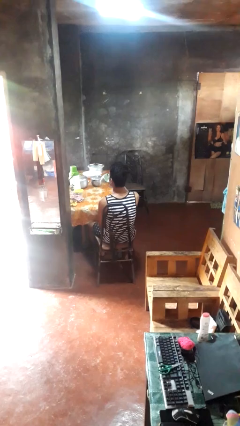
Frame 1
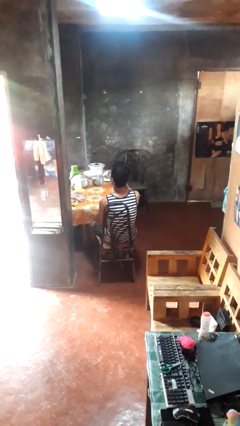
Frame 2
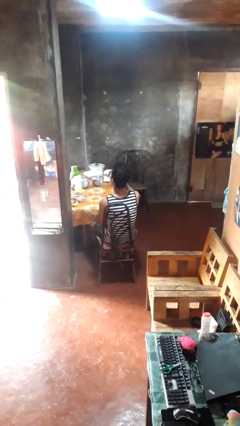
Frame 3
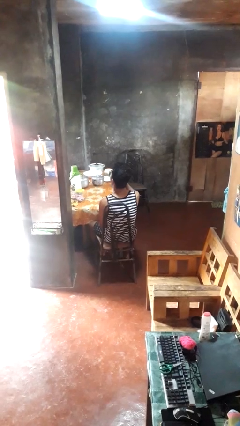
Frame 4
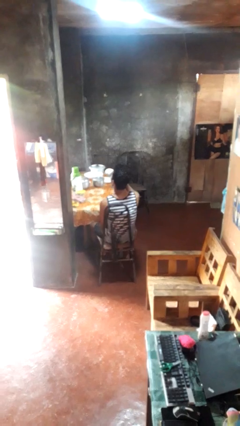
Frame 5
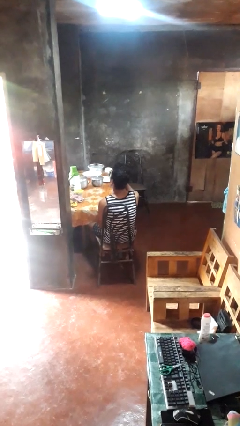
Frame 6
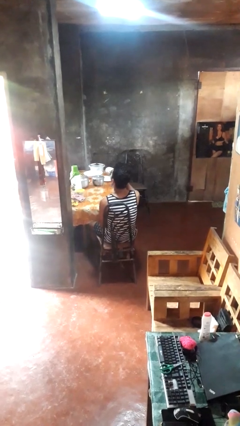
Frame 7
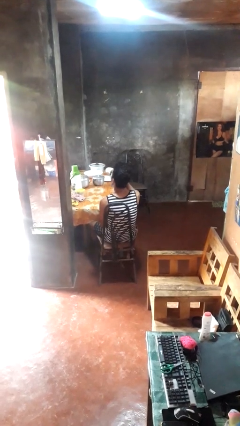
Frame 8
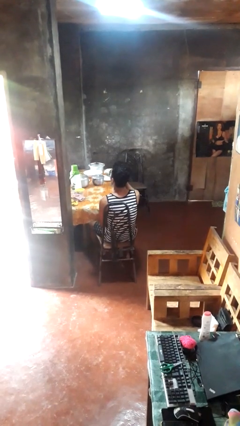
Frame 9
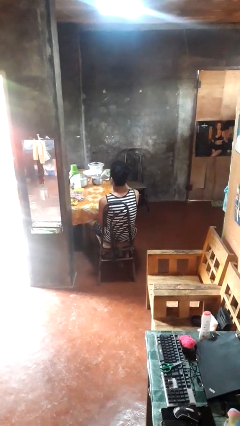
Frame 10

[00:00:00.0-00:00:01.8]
person drinks from mug

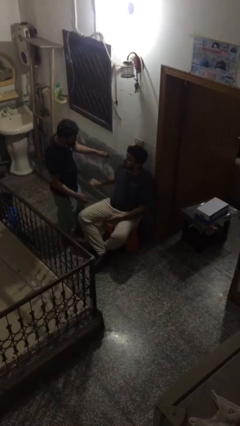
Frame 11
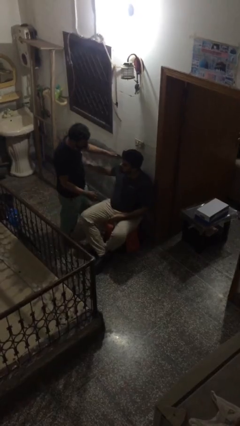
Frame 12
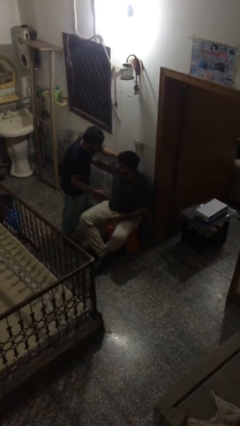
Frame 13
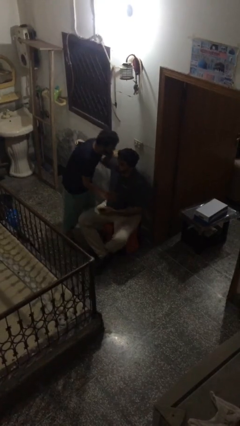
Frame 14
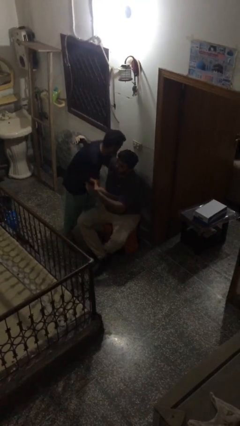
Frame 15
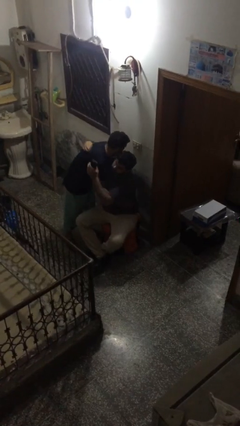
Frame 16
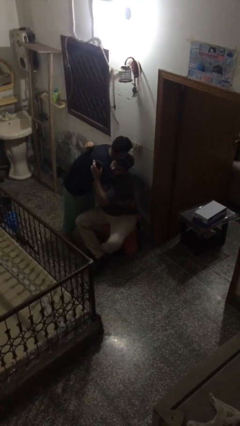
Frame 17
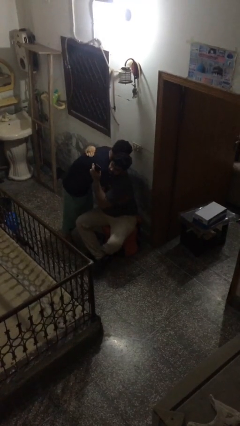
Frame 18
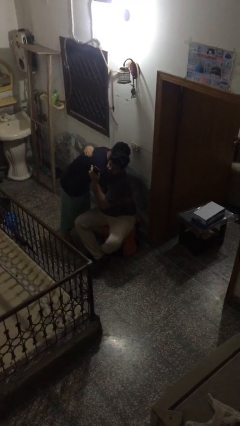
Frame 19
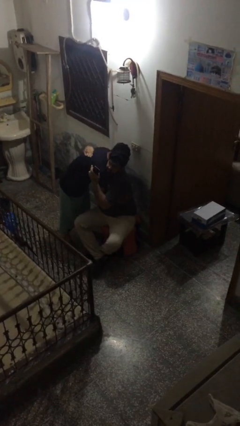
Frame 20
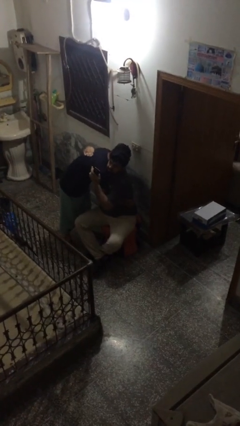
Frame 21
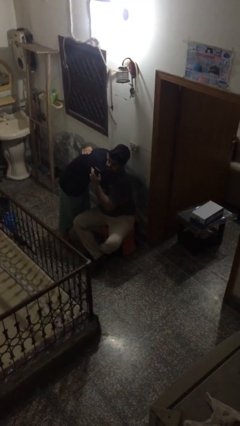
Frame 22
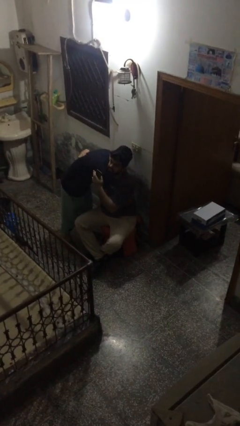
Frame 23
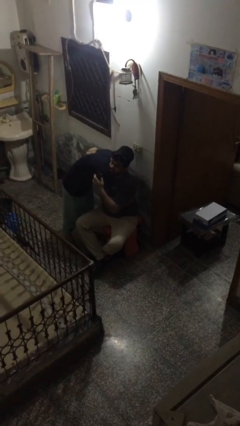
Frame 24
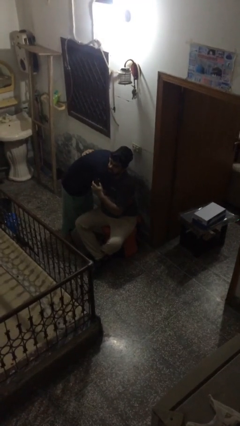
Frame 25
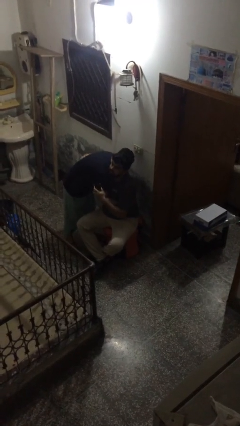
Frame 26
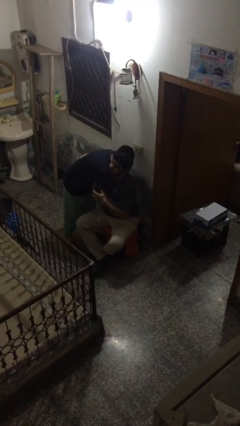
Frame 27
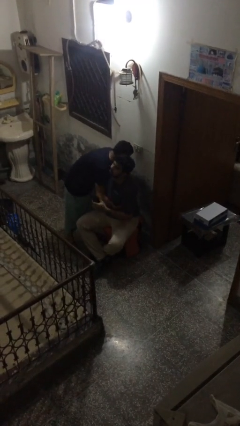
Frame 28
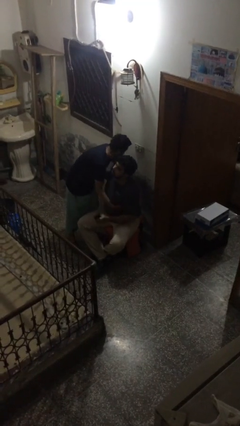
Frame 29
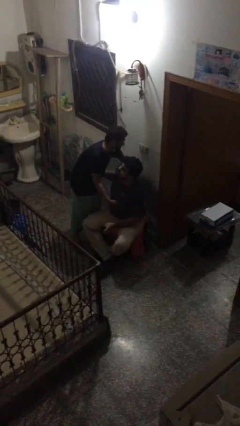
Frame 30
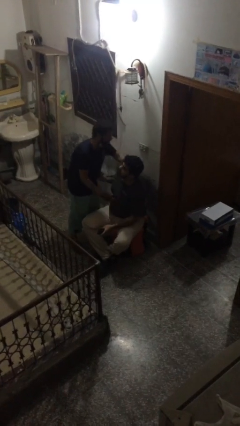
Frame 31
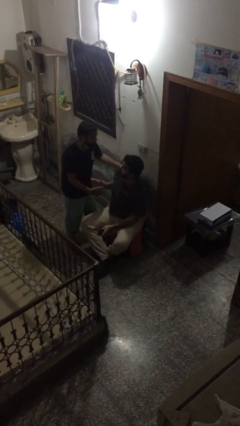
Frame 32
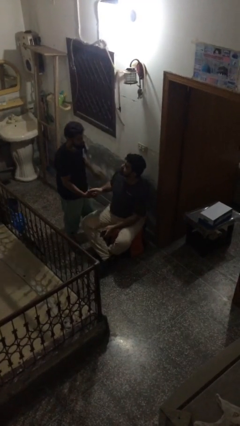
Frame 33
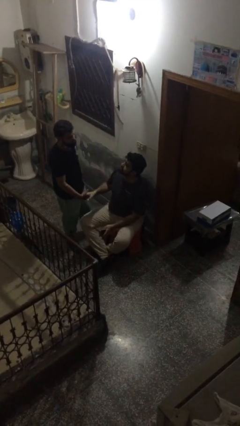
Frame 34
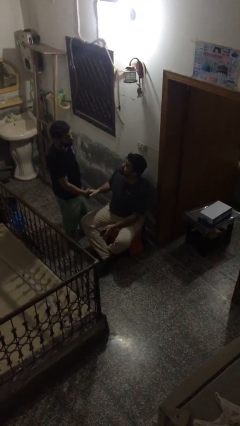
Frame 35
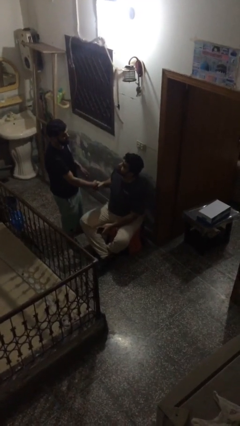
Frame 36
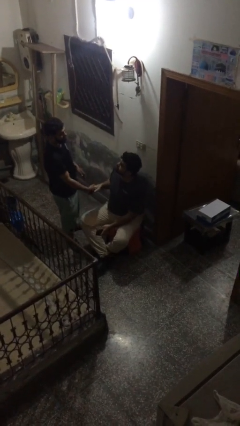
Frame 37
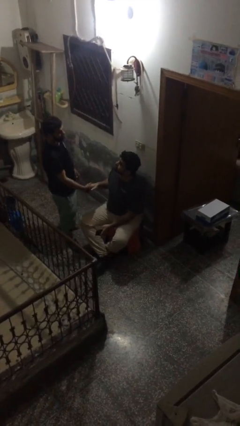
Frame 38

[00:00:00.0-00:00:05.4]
person embraces person

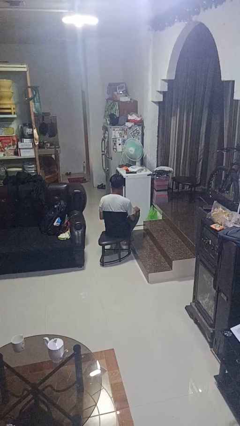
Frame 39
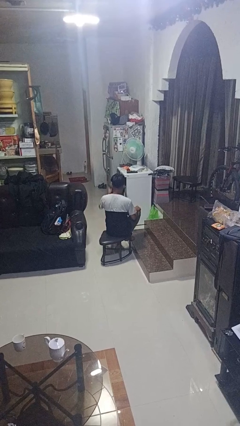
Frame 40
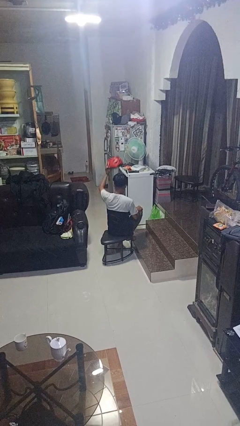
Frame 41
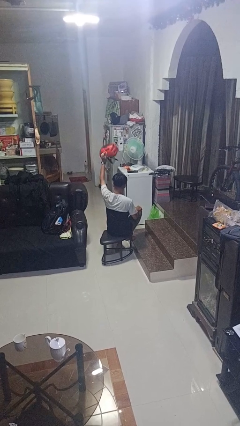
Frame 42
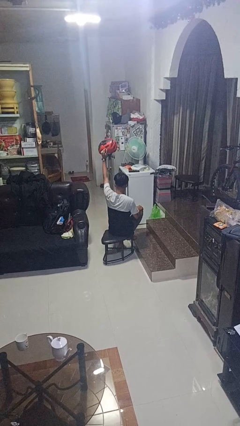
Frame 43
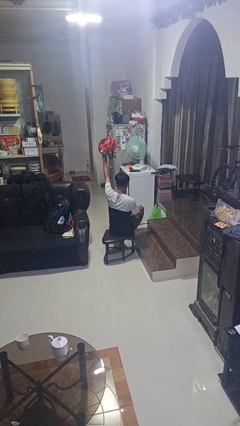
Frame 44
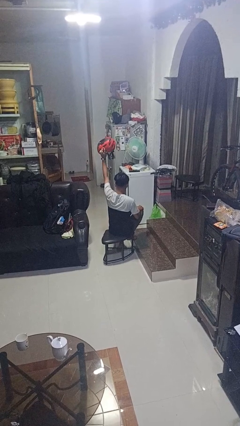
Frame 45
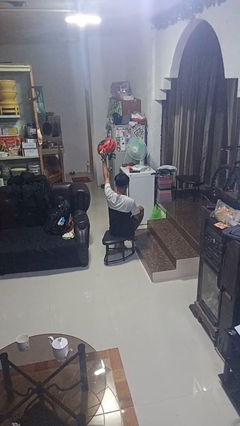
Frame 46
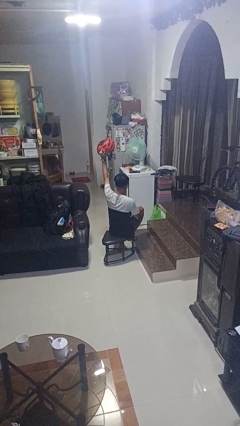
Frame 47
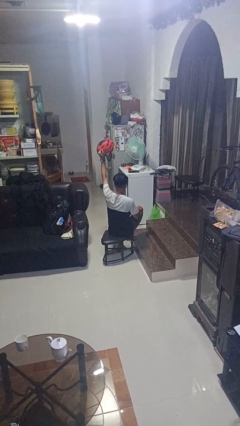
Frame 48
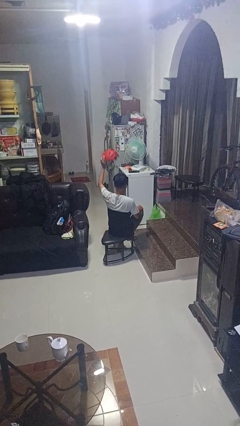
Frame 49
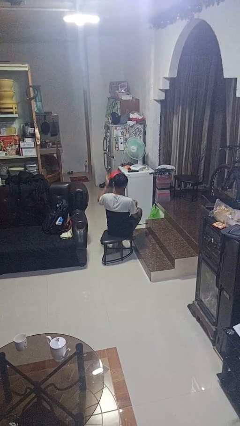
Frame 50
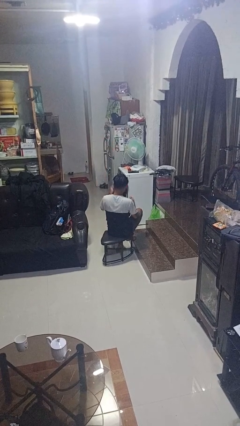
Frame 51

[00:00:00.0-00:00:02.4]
person holds object above head

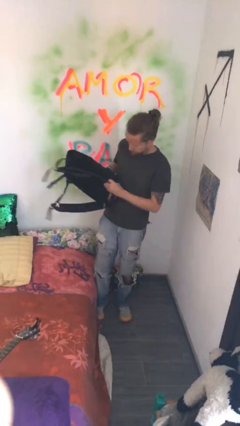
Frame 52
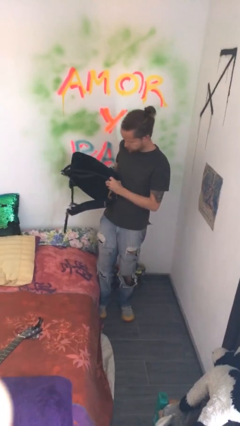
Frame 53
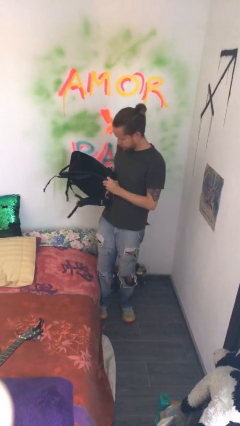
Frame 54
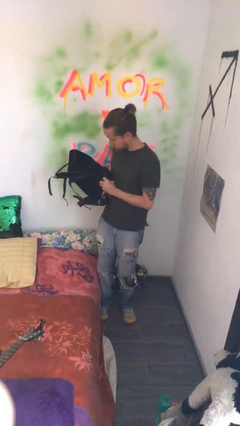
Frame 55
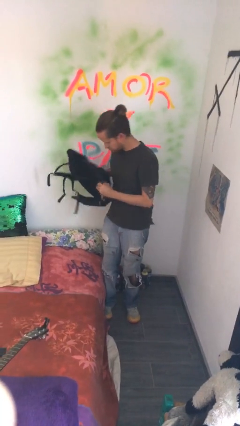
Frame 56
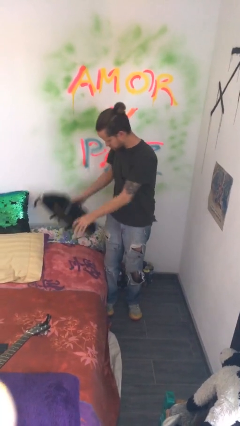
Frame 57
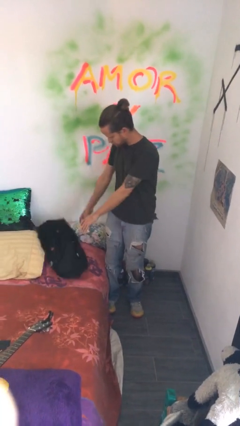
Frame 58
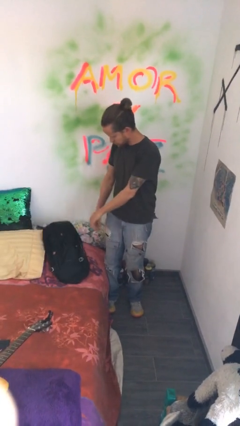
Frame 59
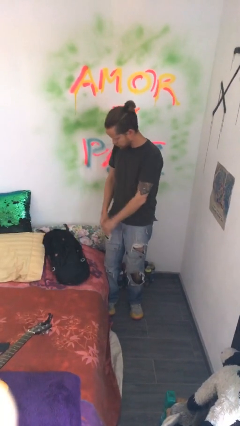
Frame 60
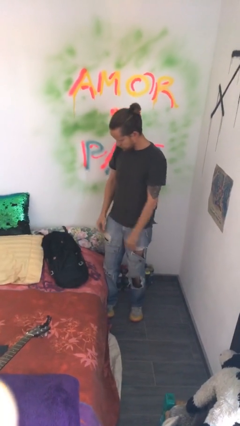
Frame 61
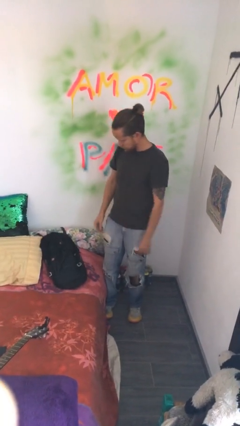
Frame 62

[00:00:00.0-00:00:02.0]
person puts down object on bed

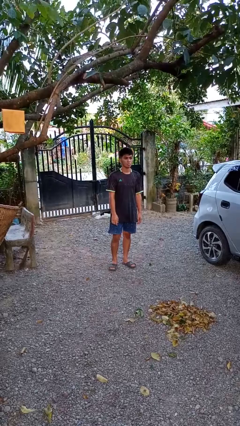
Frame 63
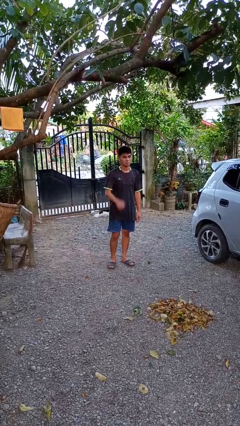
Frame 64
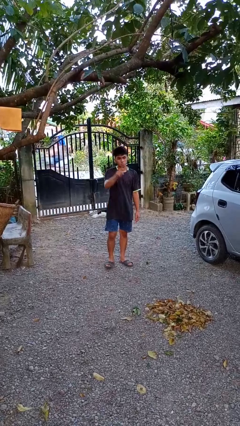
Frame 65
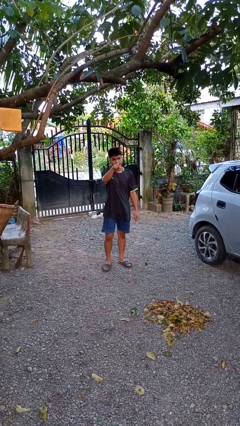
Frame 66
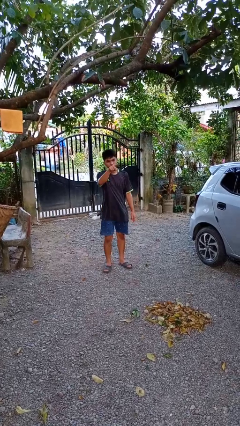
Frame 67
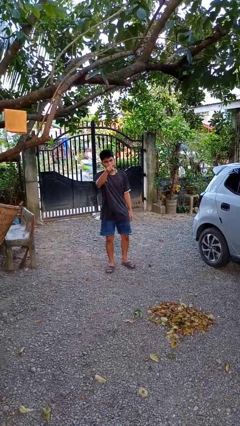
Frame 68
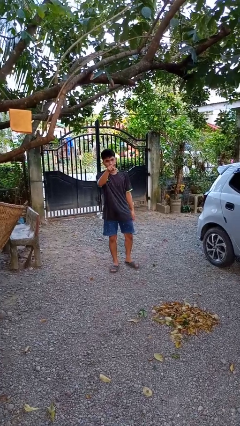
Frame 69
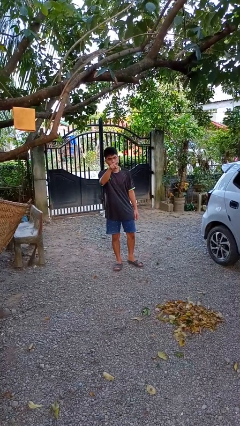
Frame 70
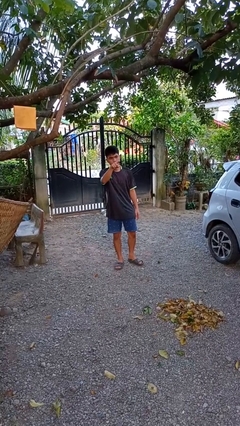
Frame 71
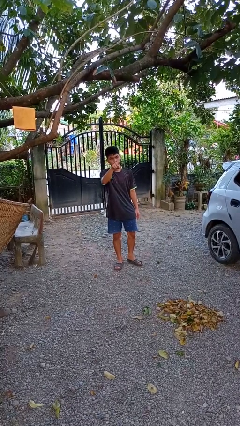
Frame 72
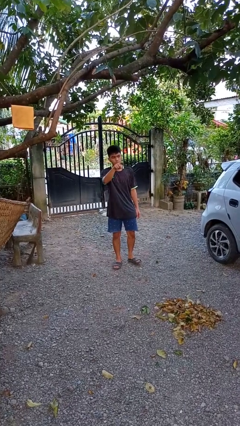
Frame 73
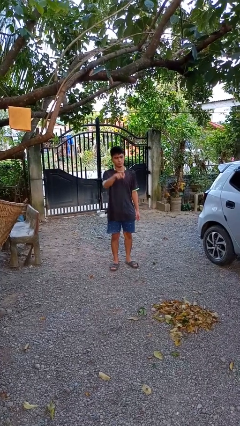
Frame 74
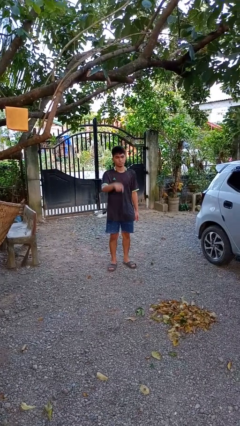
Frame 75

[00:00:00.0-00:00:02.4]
person points at person

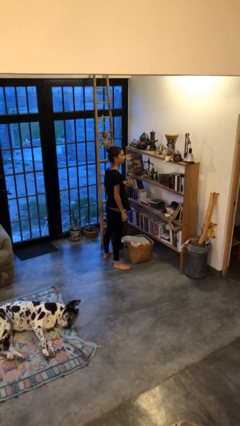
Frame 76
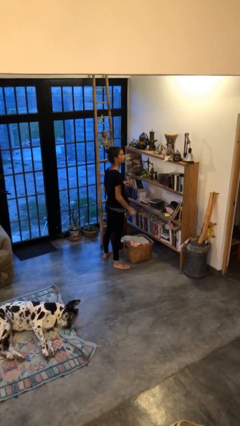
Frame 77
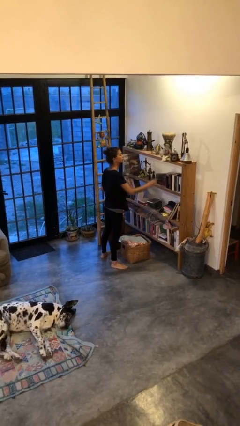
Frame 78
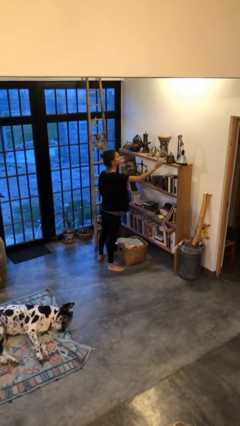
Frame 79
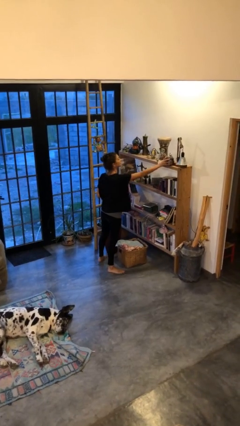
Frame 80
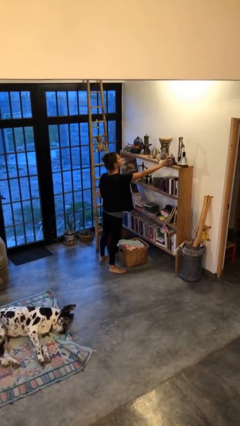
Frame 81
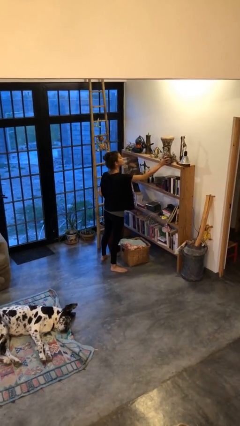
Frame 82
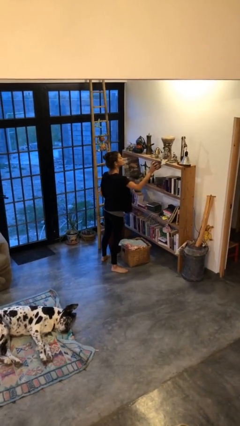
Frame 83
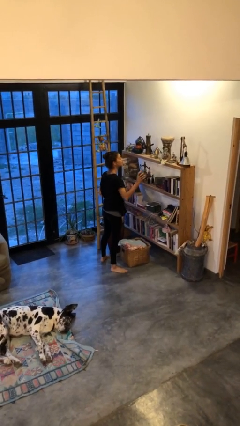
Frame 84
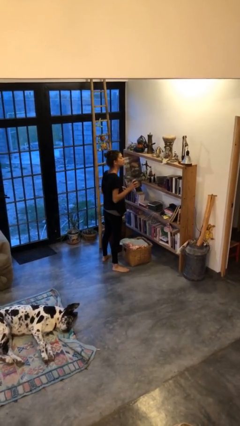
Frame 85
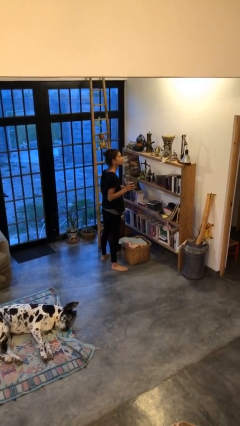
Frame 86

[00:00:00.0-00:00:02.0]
person picks up object from countertop

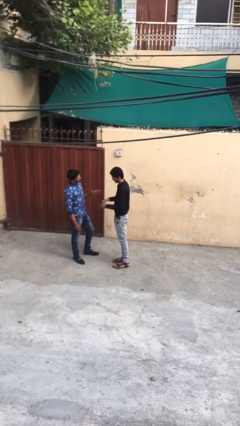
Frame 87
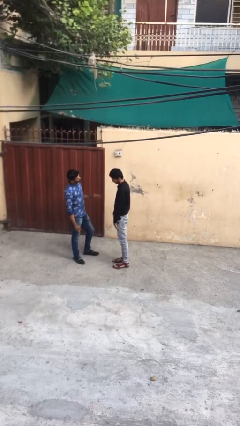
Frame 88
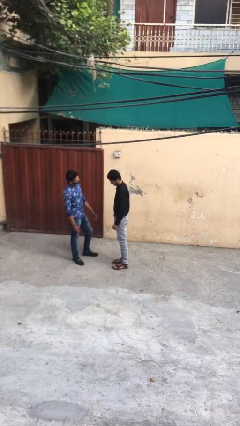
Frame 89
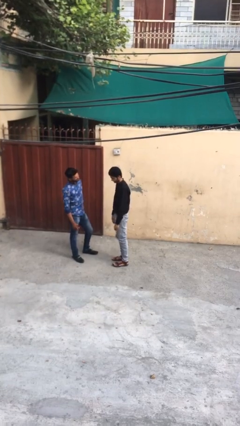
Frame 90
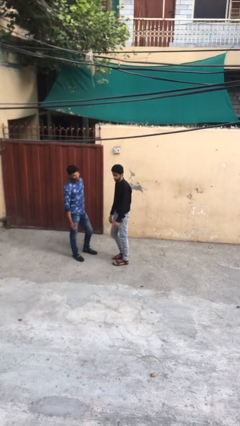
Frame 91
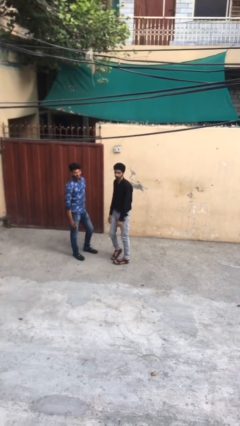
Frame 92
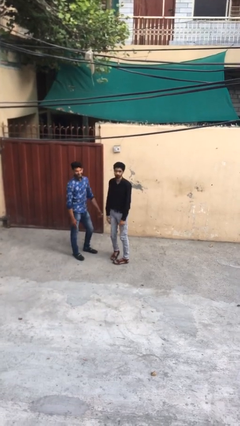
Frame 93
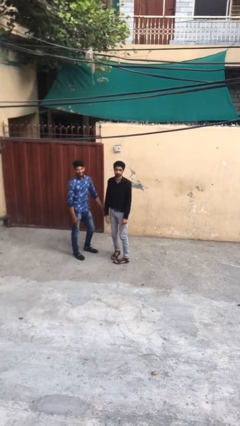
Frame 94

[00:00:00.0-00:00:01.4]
person talks to person
